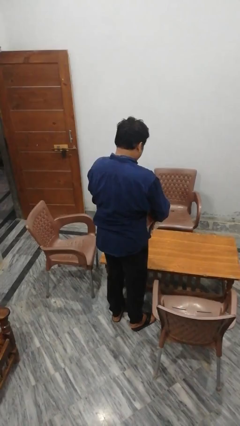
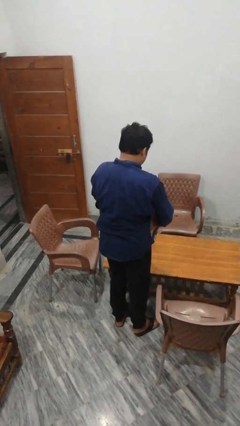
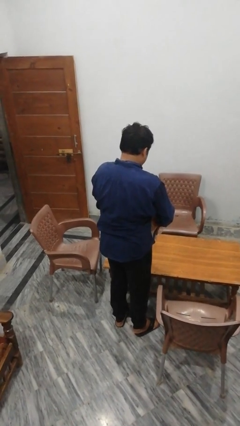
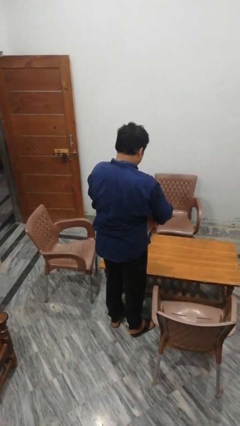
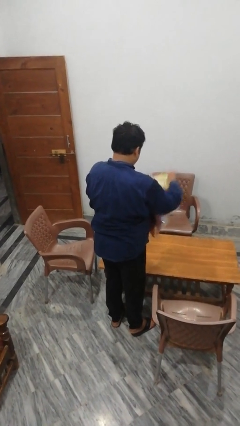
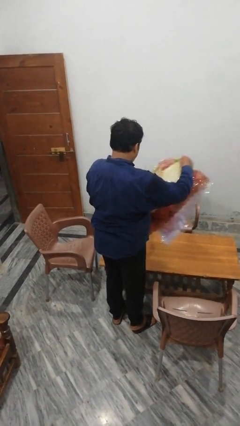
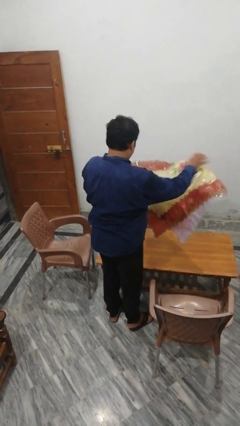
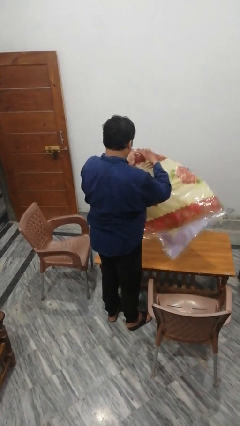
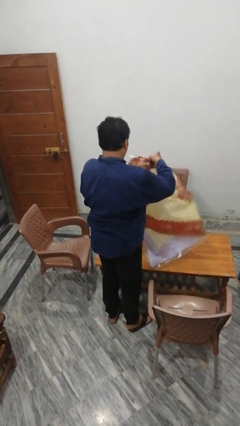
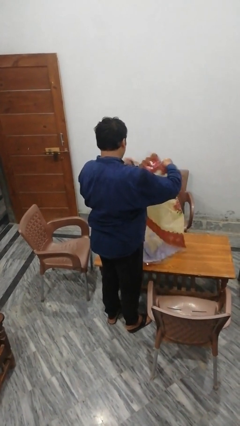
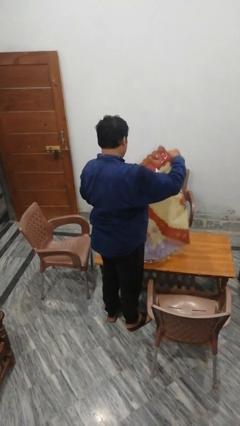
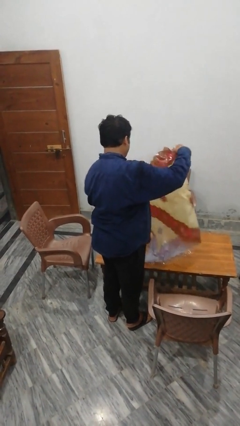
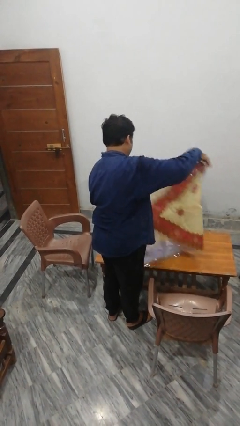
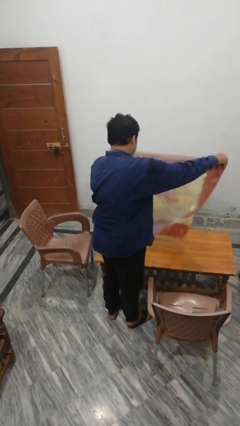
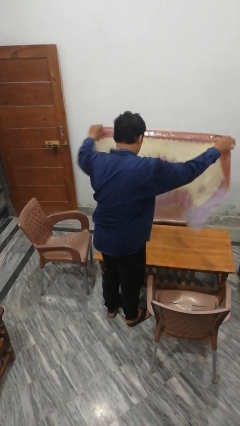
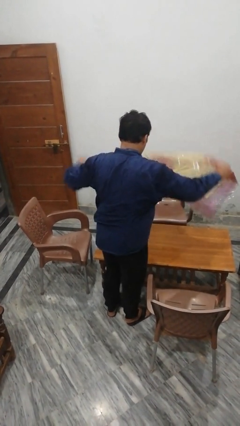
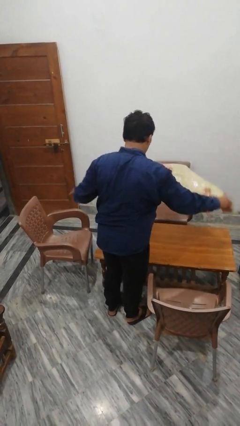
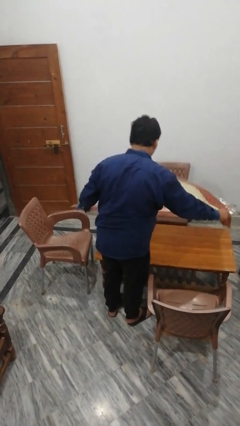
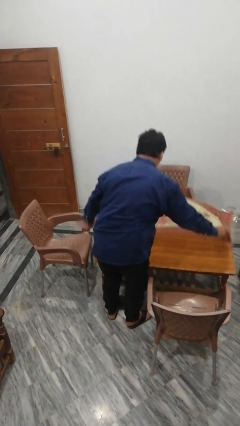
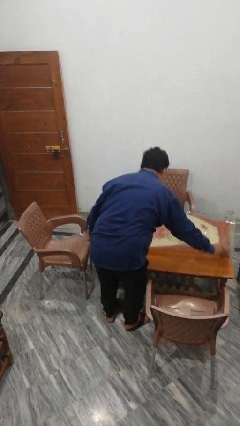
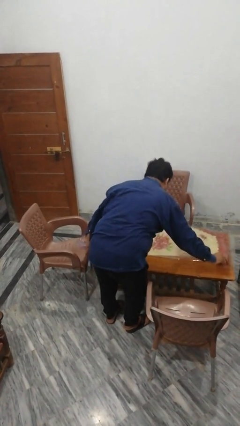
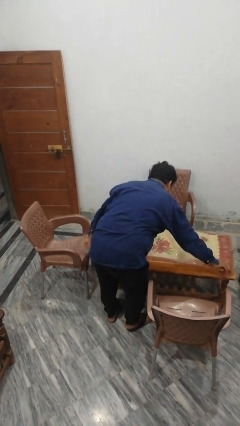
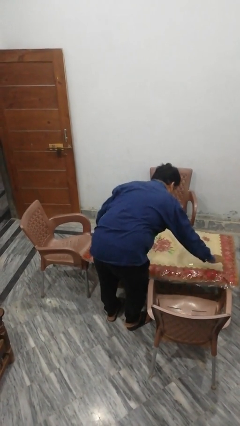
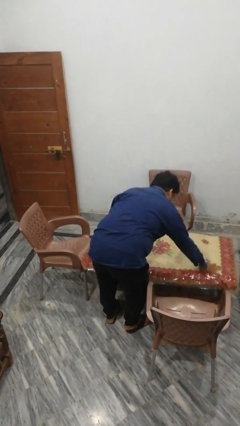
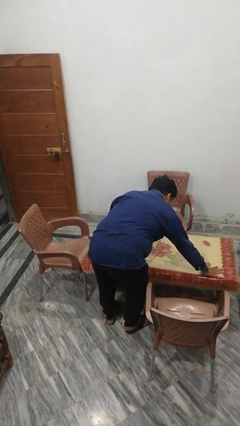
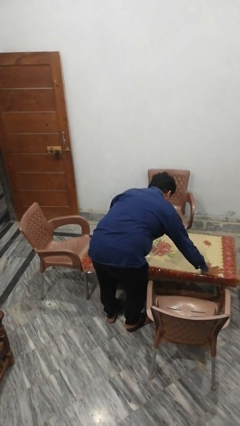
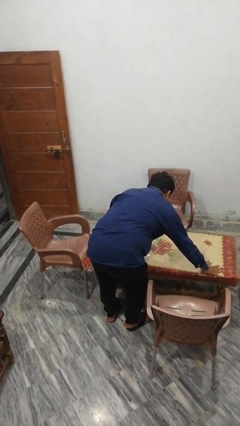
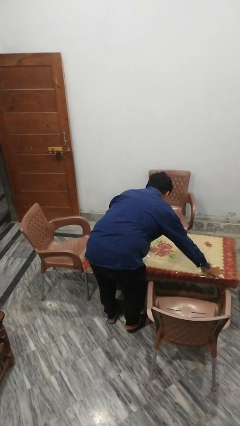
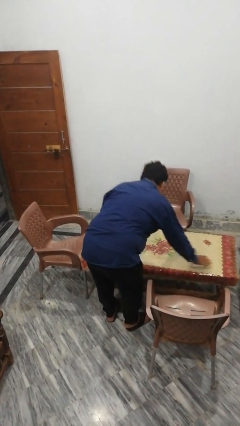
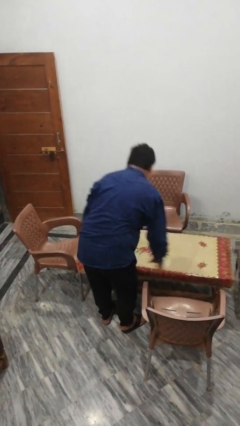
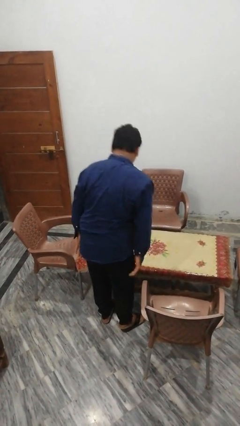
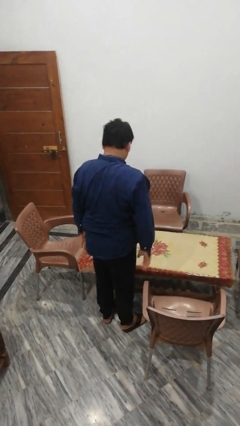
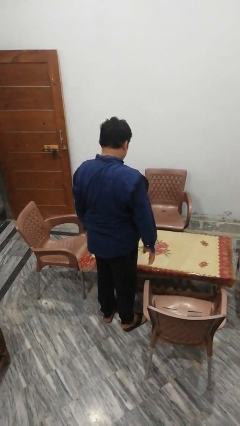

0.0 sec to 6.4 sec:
person spreads tablecloth

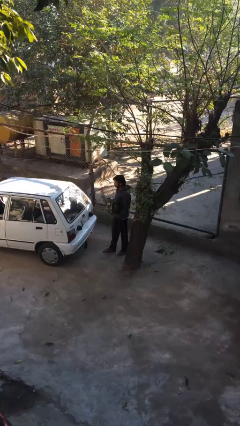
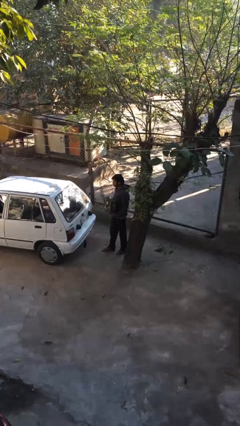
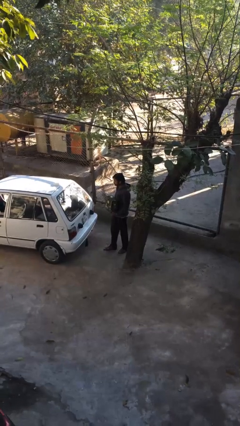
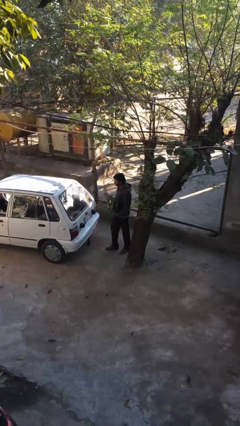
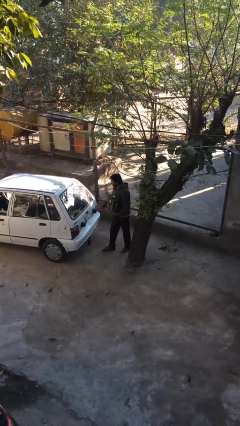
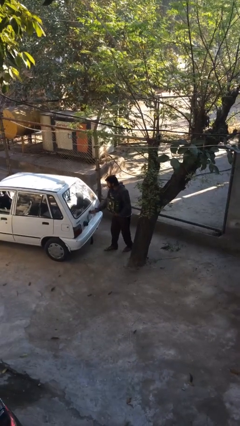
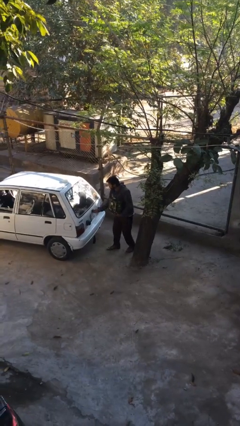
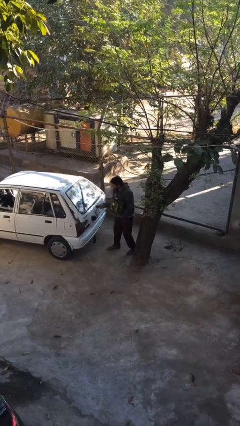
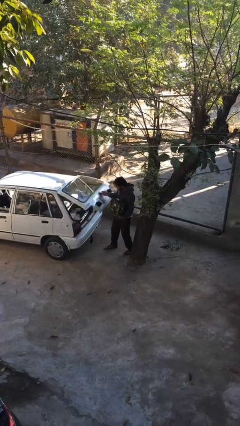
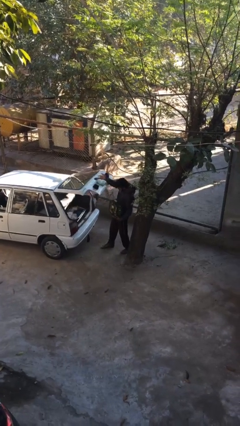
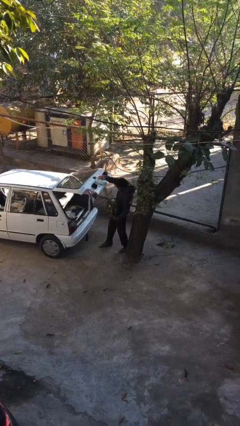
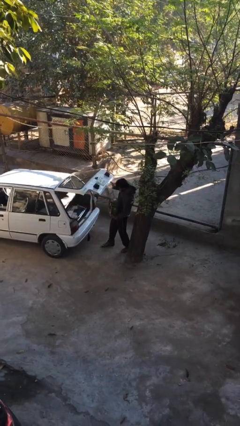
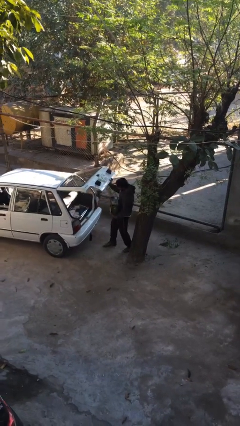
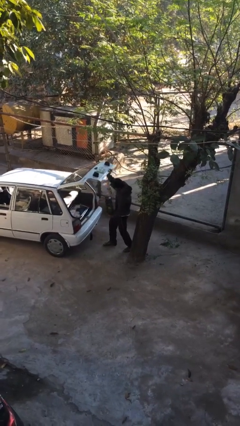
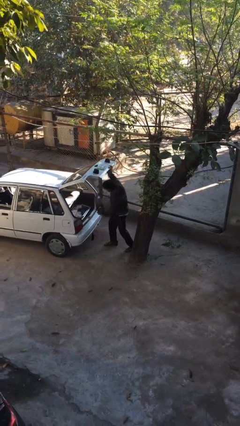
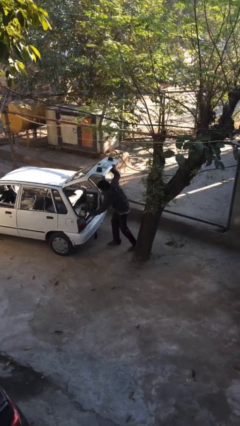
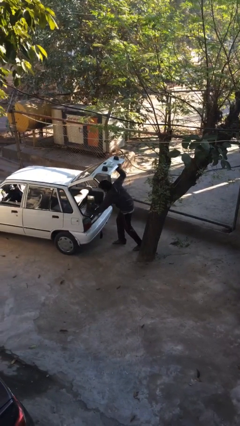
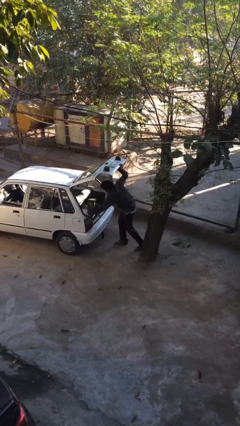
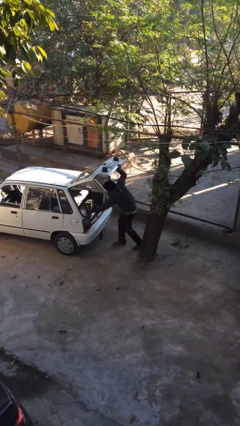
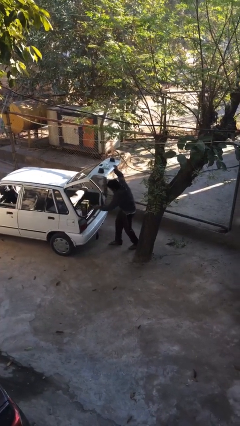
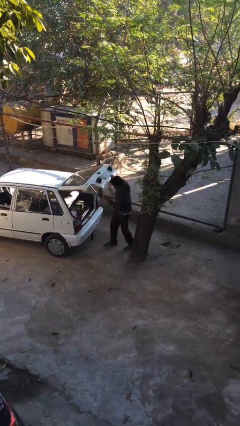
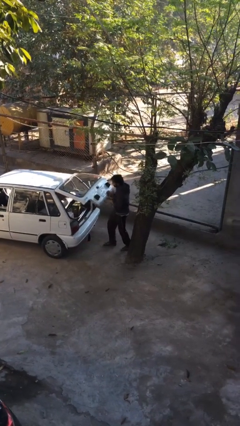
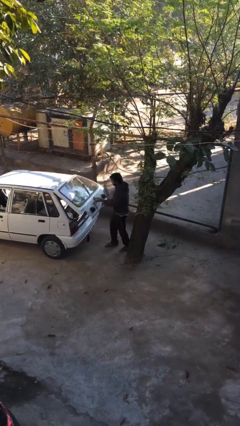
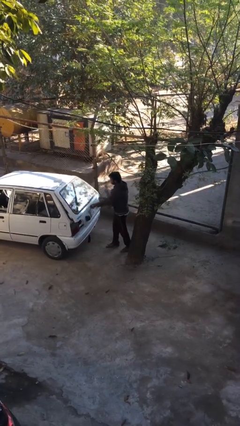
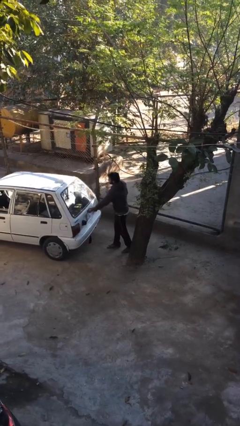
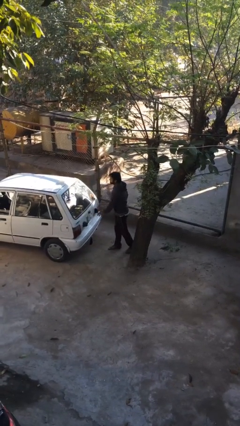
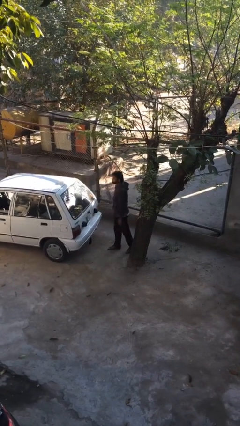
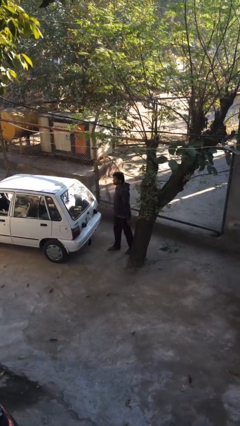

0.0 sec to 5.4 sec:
person loads car

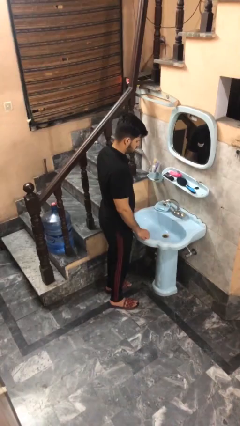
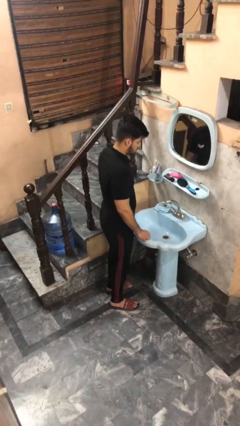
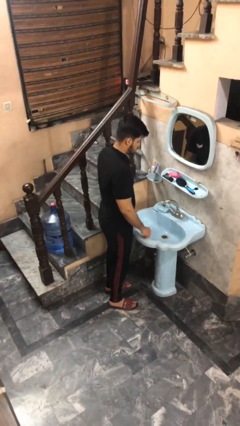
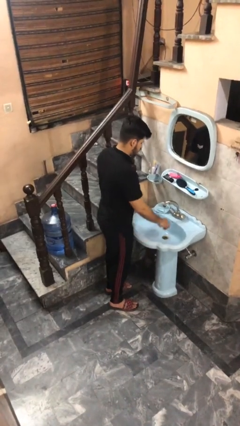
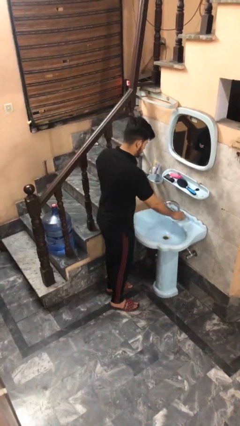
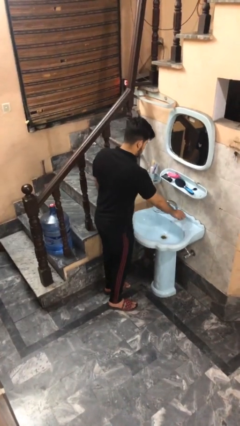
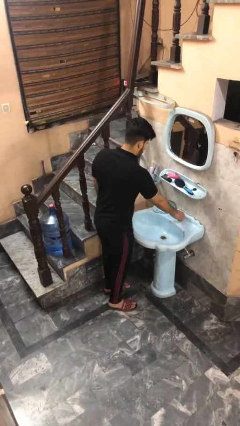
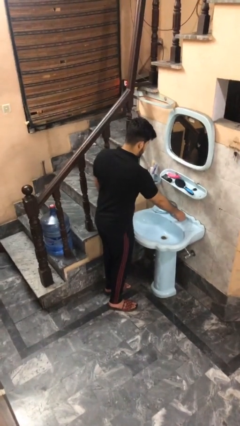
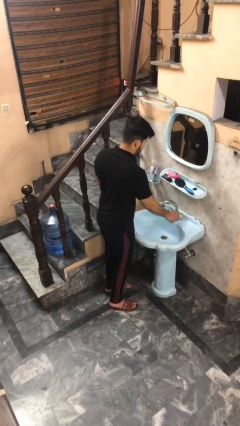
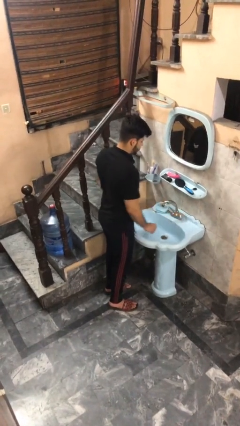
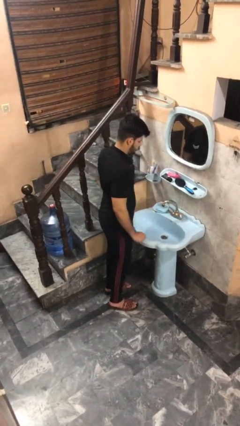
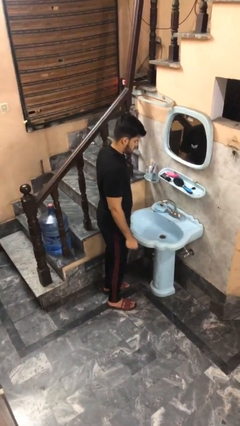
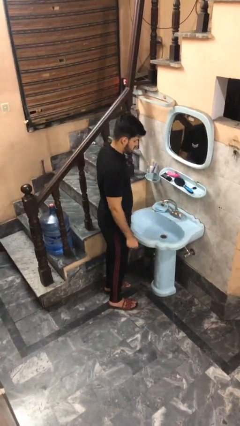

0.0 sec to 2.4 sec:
person turns off faucet

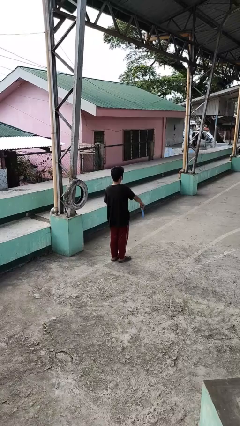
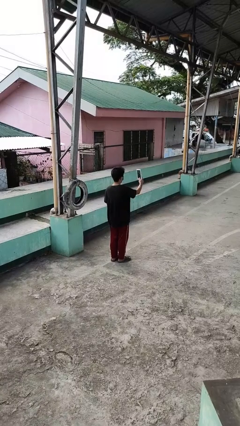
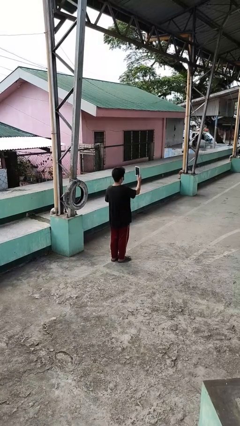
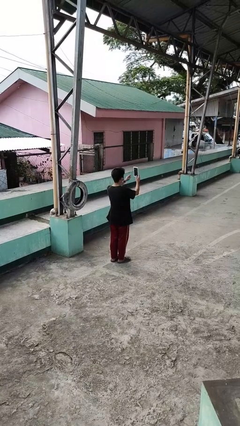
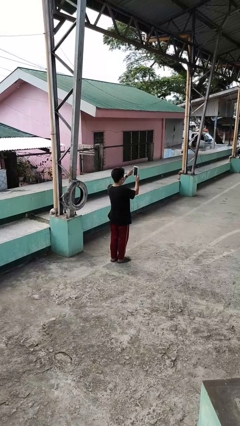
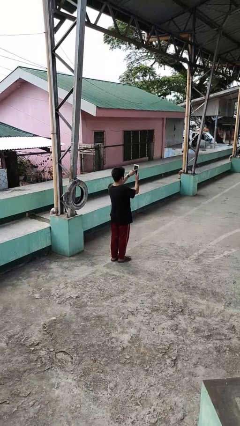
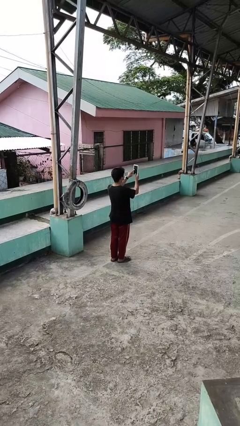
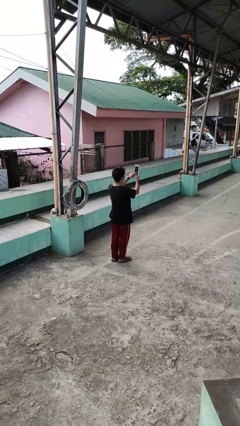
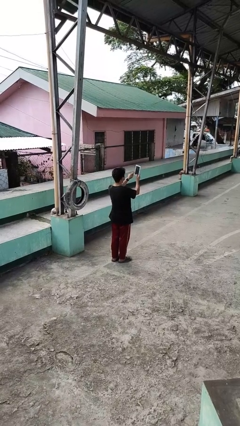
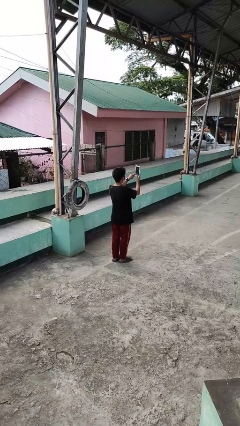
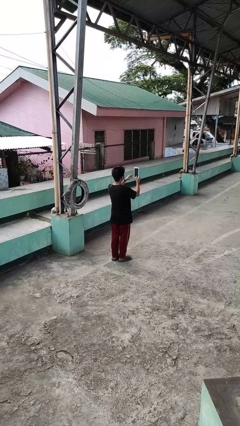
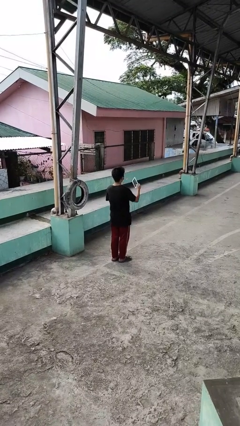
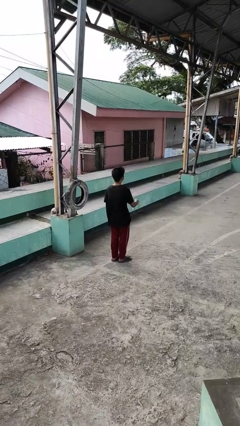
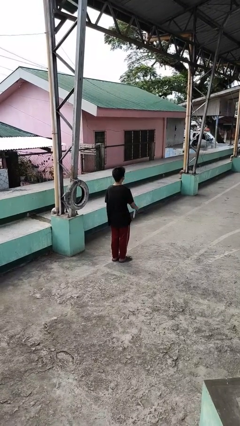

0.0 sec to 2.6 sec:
person interacts with tablet

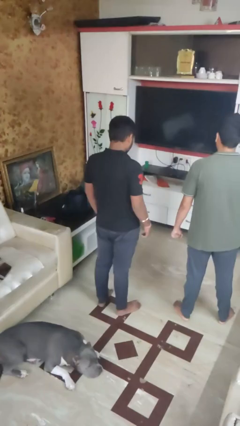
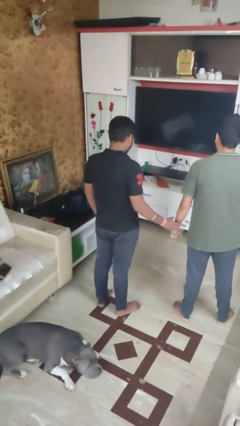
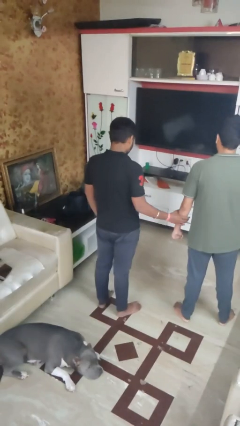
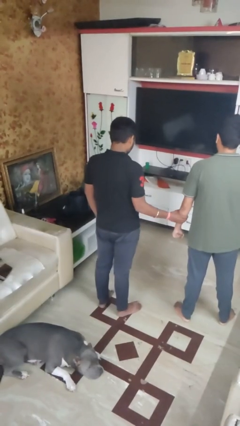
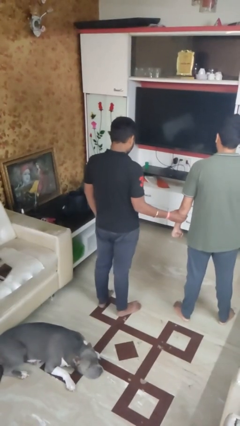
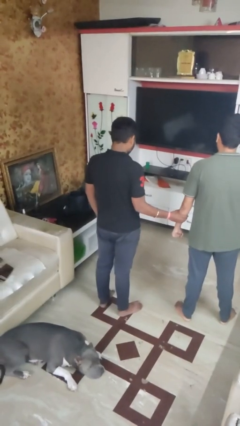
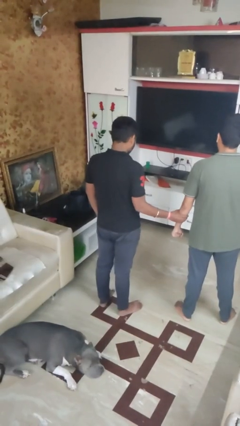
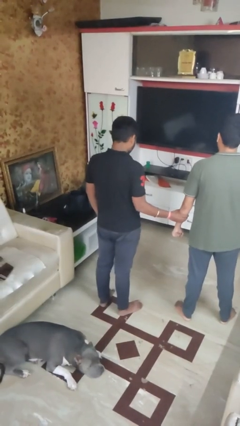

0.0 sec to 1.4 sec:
person grabs person by forearm
